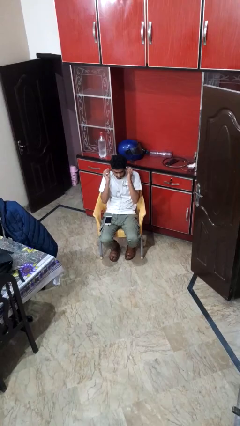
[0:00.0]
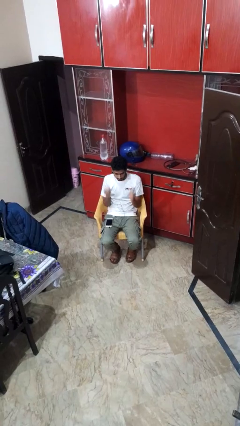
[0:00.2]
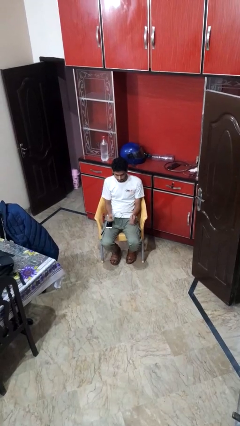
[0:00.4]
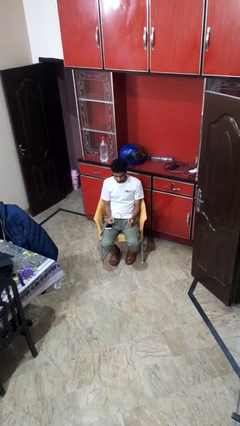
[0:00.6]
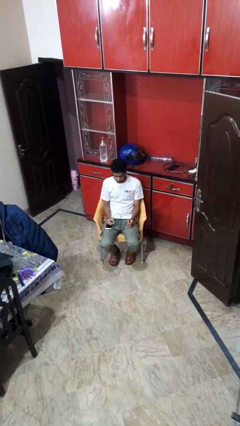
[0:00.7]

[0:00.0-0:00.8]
person takes off headphones

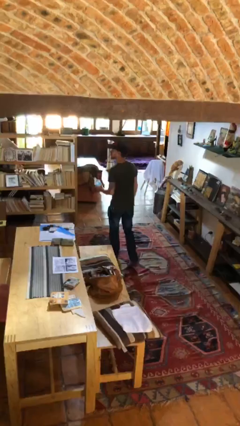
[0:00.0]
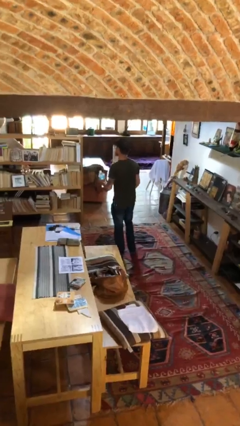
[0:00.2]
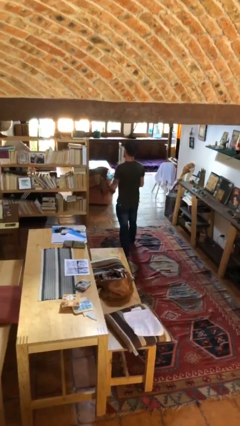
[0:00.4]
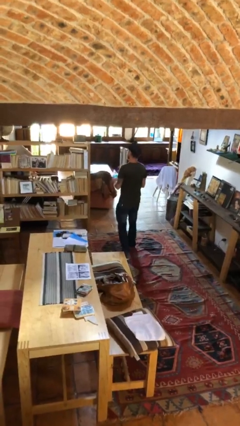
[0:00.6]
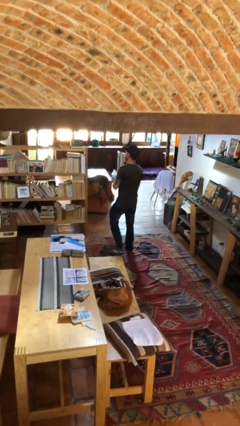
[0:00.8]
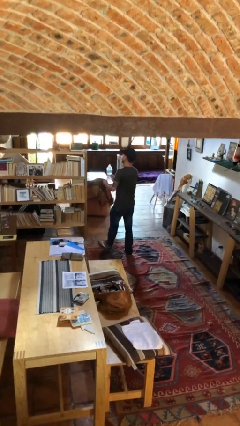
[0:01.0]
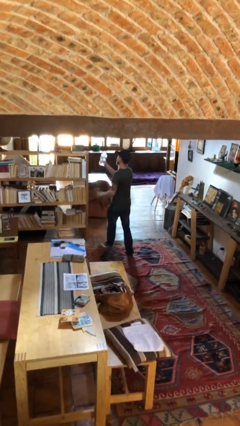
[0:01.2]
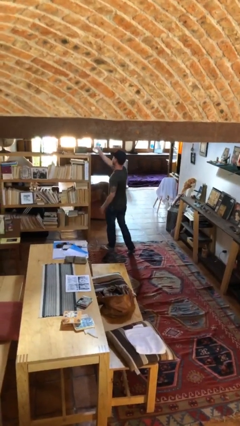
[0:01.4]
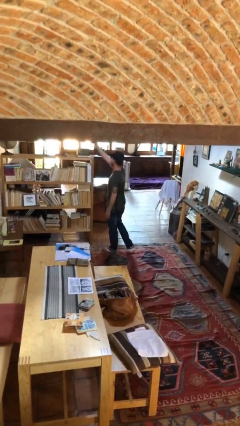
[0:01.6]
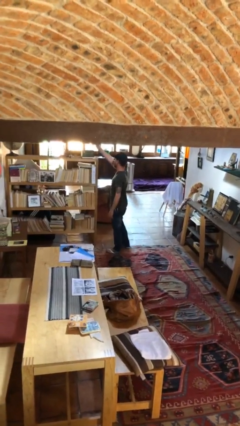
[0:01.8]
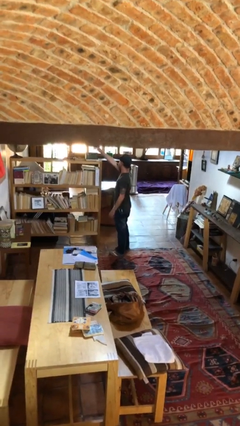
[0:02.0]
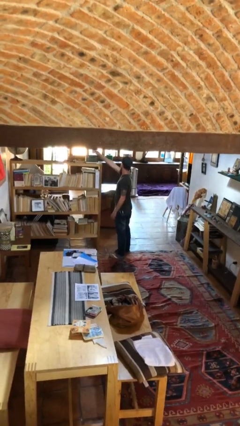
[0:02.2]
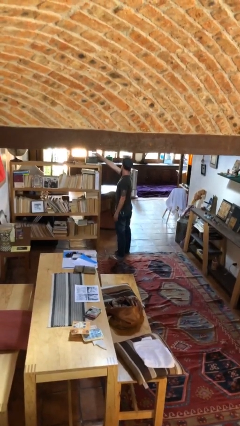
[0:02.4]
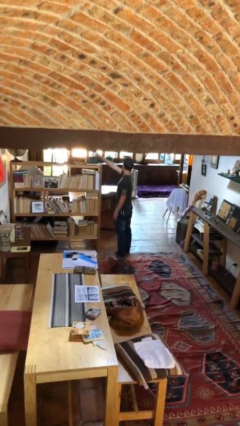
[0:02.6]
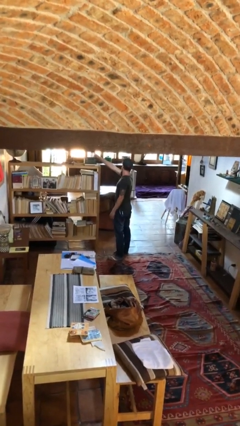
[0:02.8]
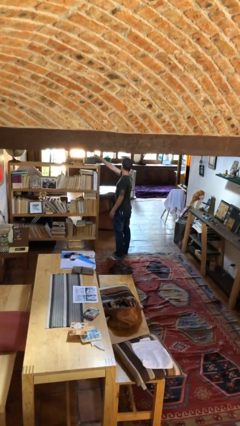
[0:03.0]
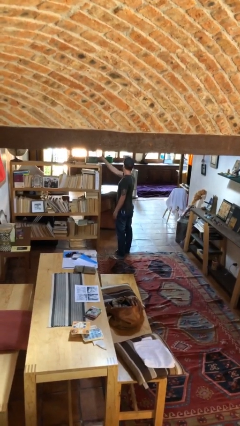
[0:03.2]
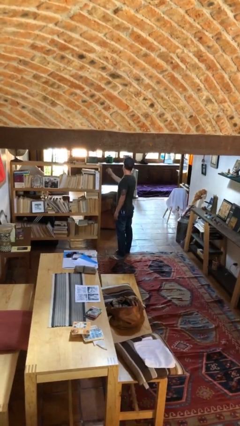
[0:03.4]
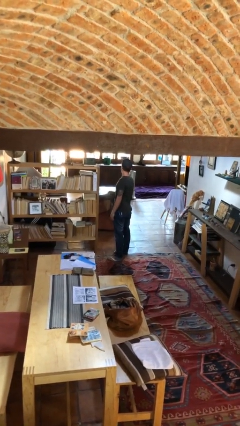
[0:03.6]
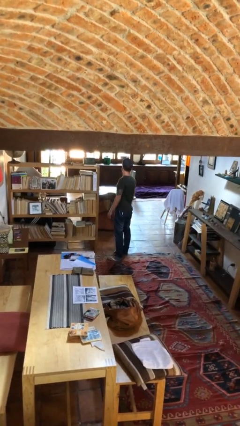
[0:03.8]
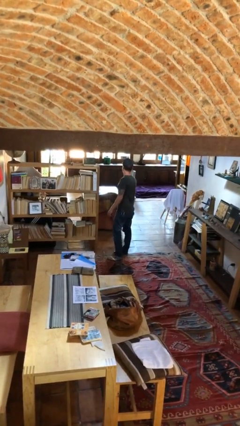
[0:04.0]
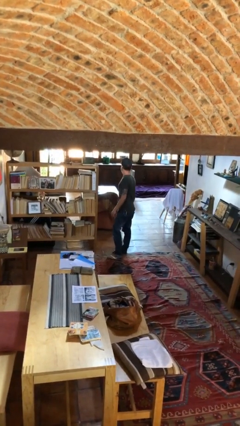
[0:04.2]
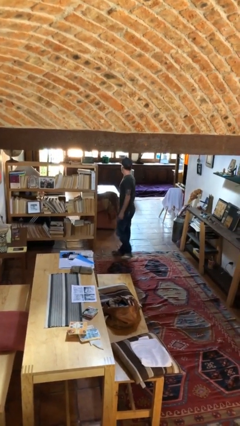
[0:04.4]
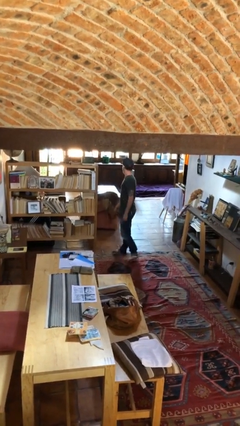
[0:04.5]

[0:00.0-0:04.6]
person puts down object on shelf

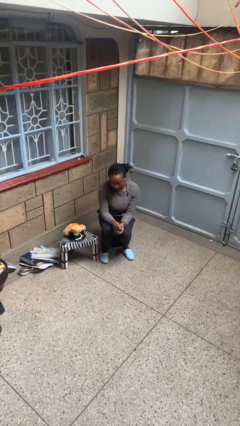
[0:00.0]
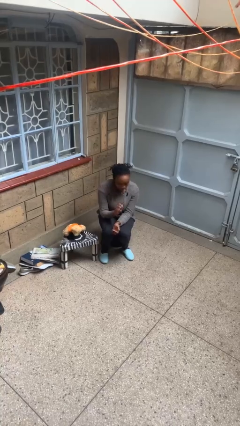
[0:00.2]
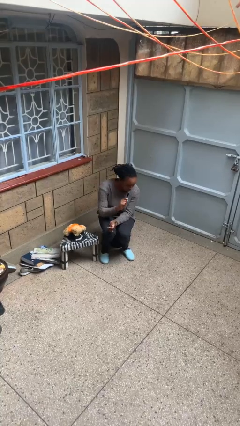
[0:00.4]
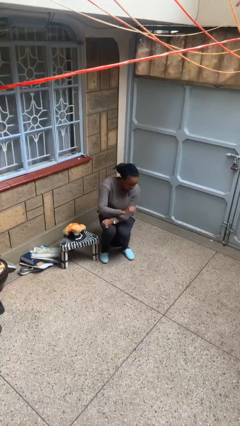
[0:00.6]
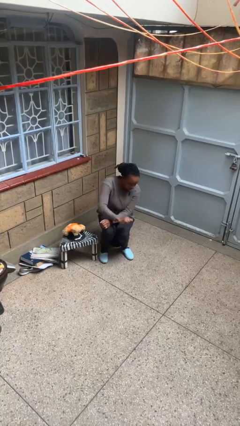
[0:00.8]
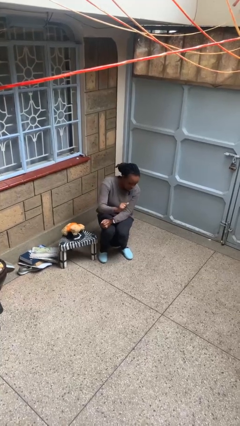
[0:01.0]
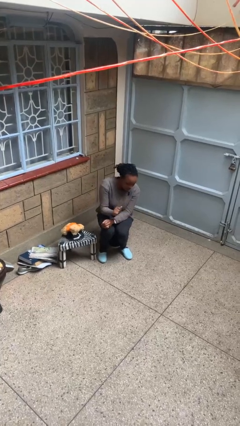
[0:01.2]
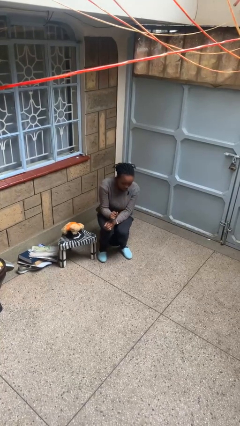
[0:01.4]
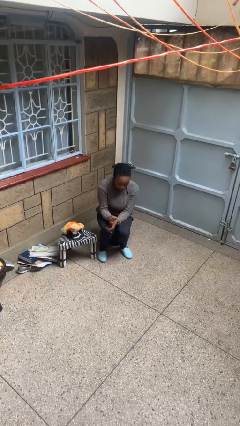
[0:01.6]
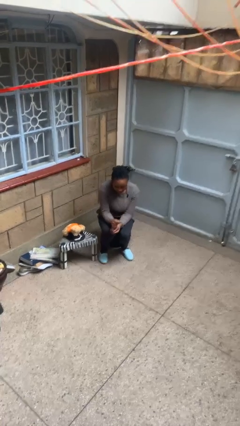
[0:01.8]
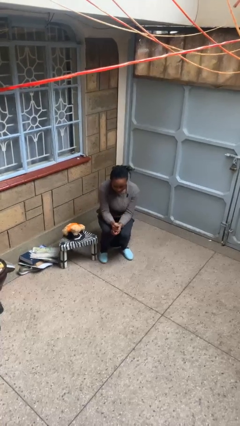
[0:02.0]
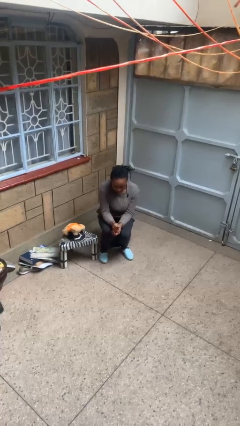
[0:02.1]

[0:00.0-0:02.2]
person swats bug

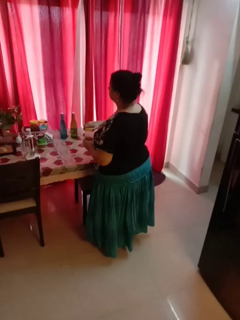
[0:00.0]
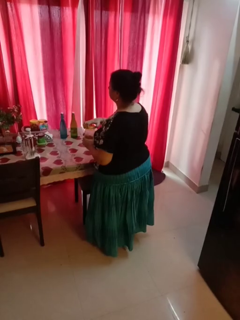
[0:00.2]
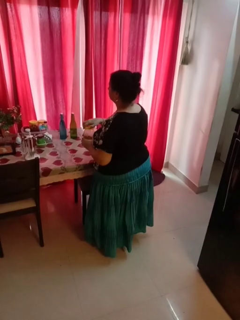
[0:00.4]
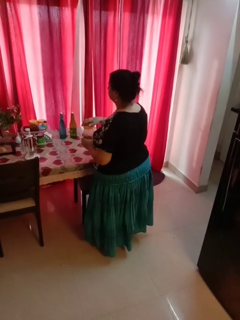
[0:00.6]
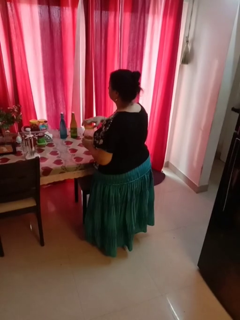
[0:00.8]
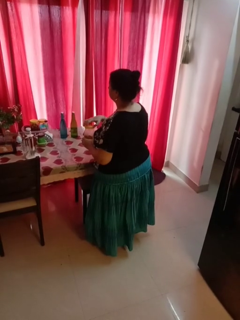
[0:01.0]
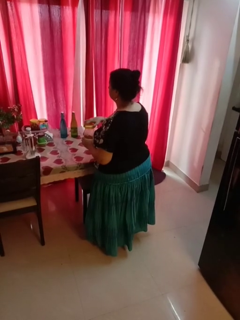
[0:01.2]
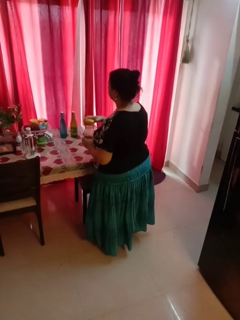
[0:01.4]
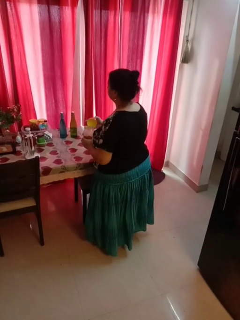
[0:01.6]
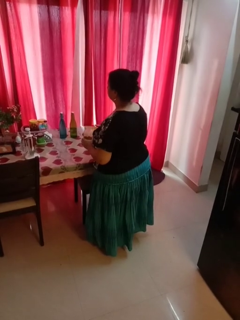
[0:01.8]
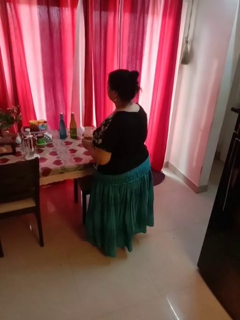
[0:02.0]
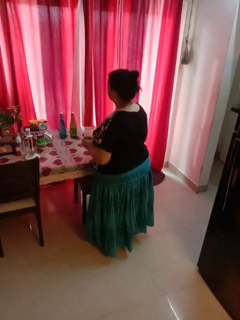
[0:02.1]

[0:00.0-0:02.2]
person opens jar

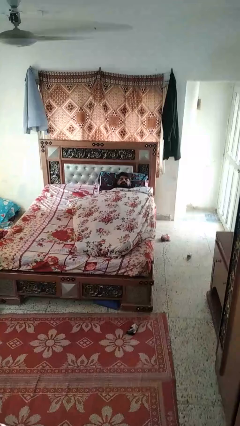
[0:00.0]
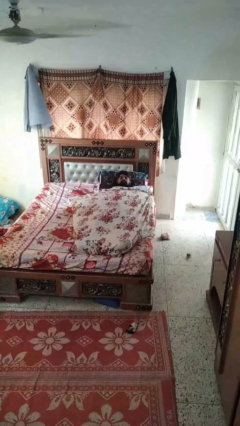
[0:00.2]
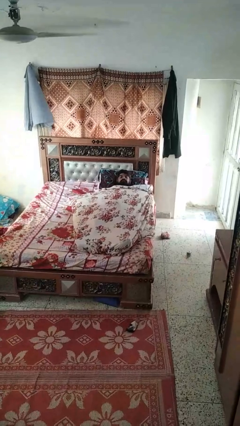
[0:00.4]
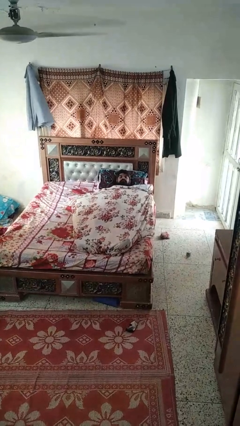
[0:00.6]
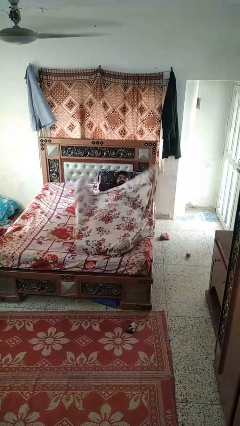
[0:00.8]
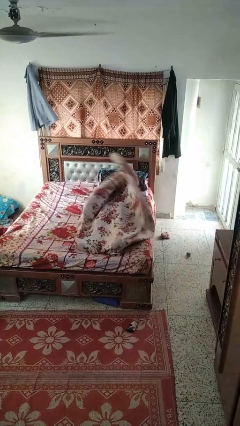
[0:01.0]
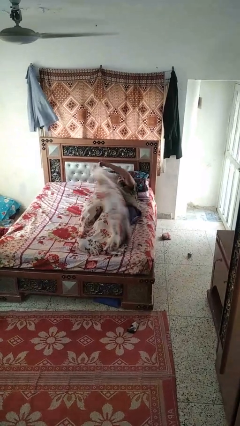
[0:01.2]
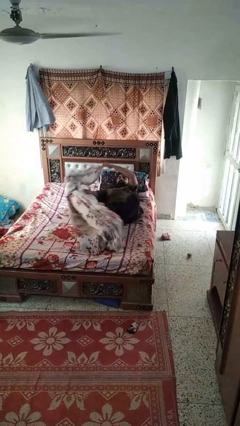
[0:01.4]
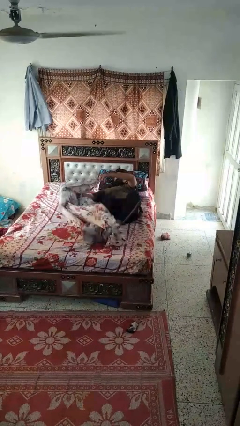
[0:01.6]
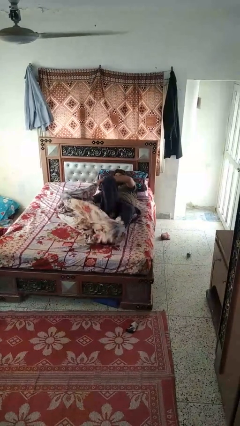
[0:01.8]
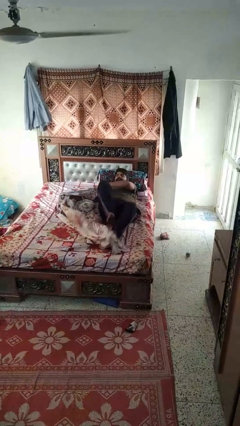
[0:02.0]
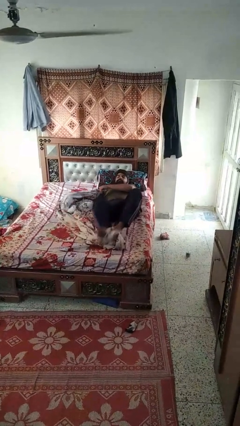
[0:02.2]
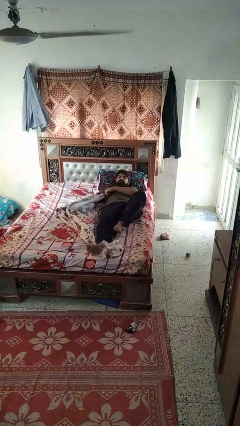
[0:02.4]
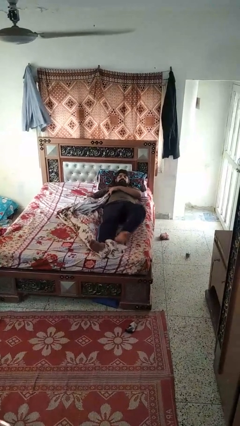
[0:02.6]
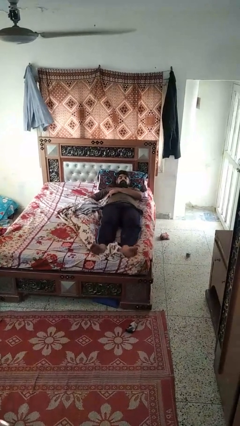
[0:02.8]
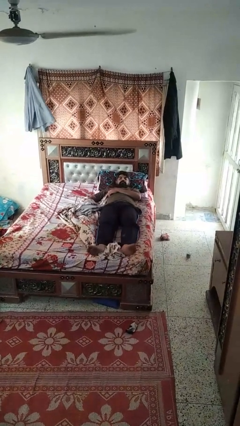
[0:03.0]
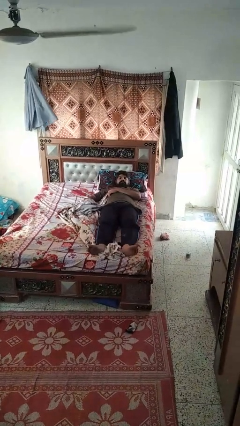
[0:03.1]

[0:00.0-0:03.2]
person uncovers with bedsheets

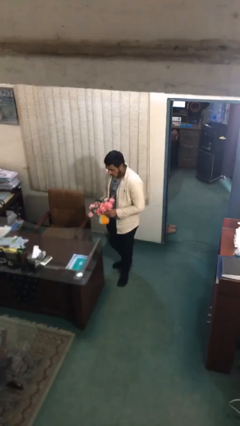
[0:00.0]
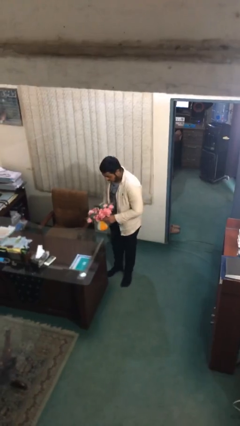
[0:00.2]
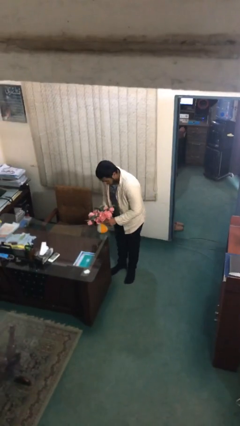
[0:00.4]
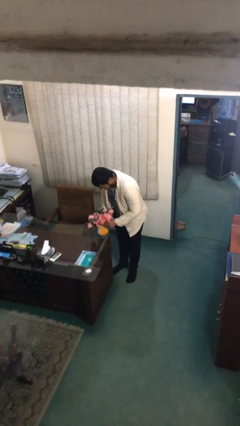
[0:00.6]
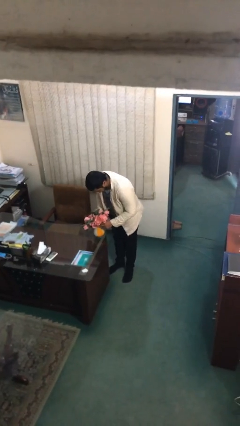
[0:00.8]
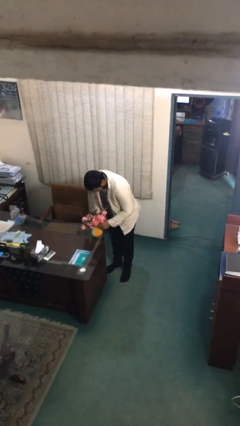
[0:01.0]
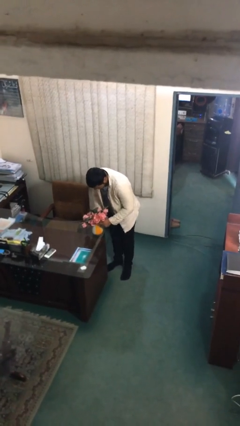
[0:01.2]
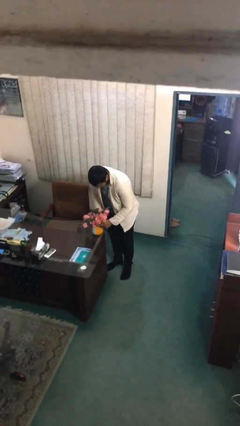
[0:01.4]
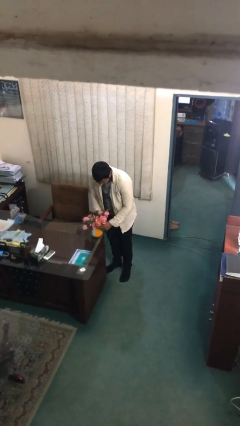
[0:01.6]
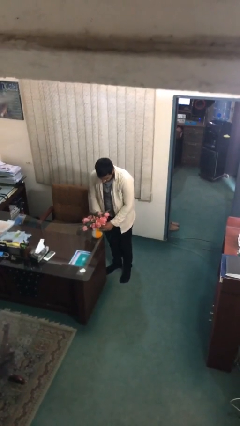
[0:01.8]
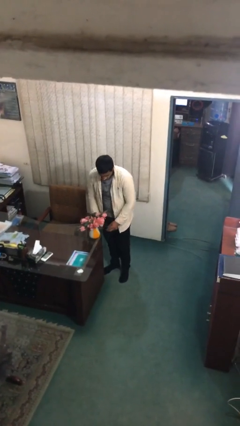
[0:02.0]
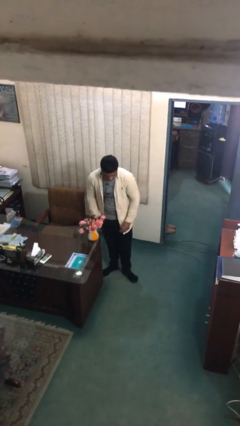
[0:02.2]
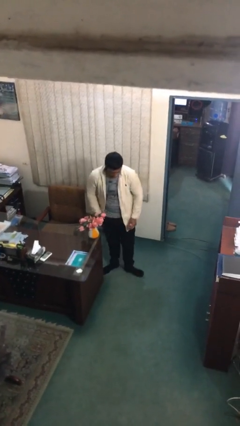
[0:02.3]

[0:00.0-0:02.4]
person puts down object on table

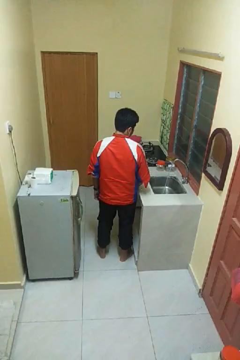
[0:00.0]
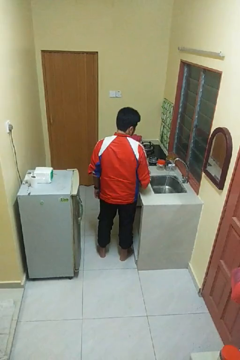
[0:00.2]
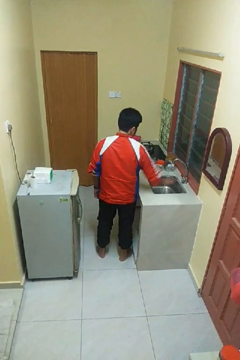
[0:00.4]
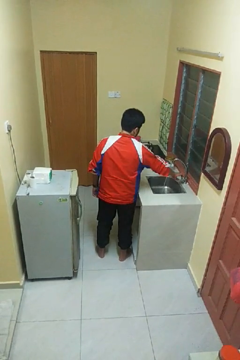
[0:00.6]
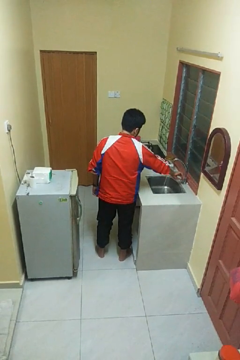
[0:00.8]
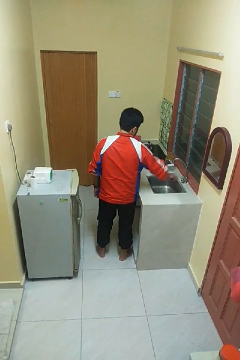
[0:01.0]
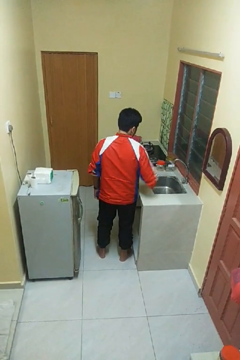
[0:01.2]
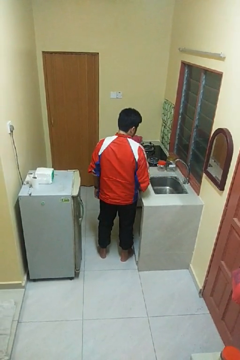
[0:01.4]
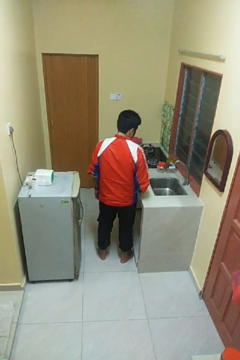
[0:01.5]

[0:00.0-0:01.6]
person turns off faucet

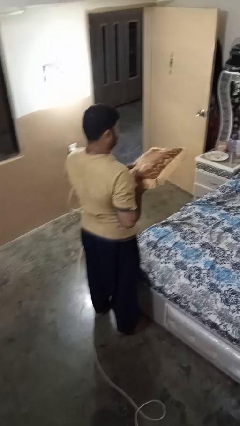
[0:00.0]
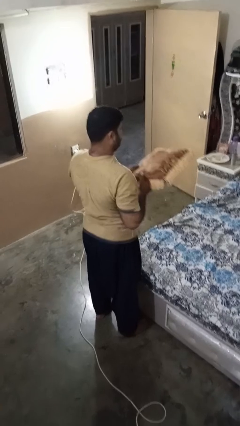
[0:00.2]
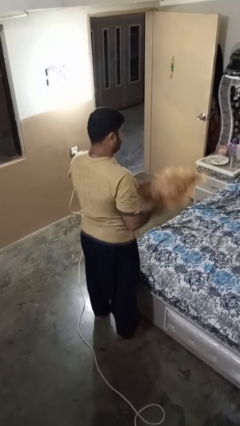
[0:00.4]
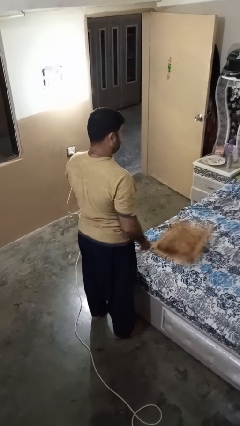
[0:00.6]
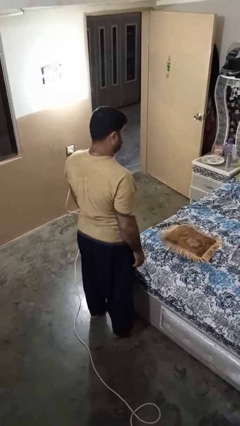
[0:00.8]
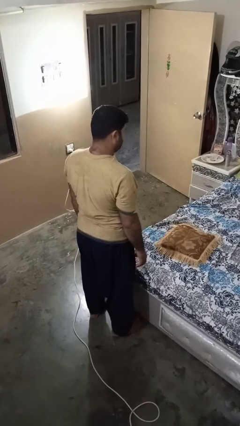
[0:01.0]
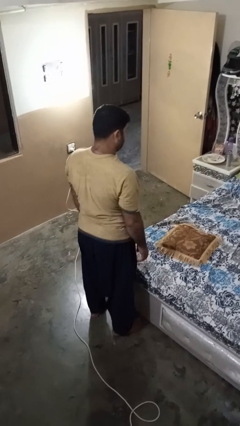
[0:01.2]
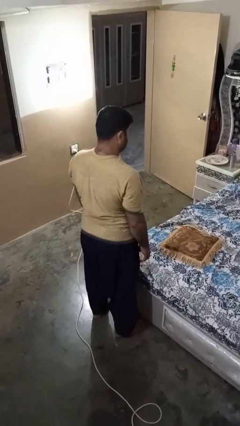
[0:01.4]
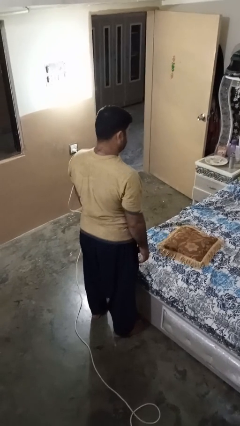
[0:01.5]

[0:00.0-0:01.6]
person puts down object on bed
